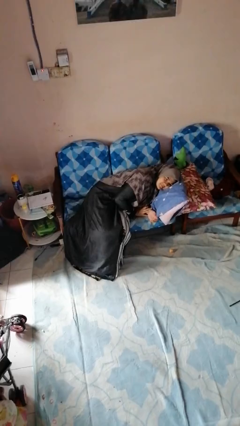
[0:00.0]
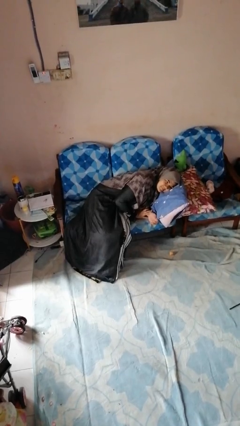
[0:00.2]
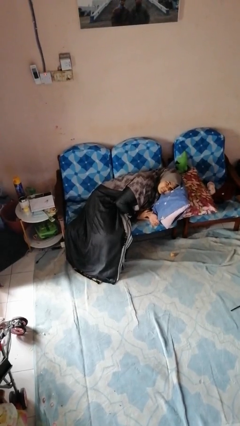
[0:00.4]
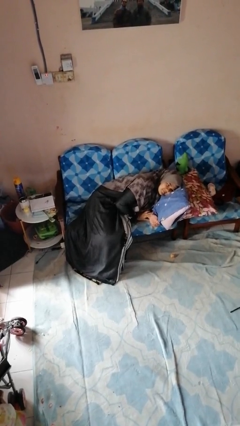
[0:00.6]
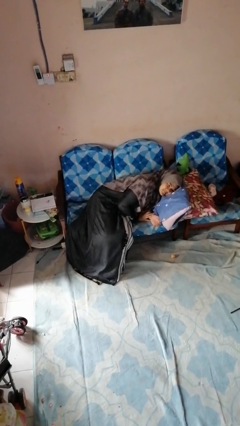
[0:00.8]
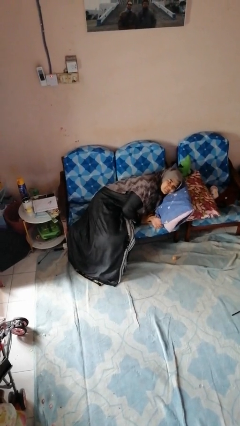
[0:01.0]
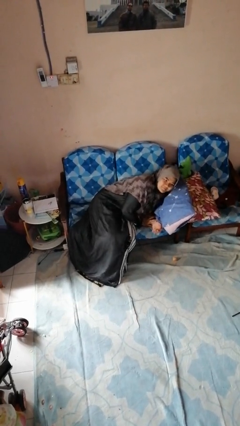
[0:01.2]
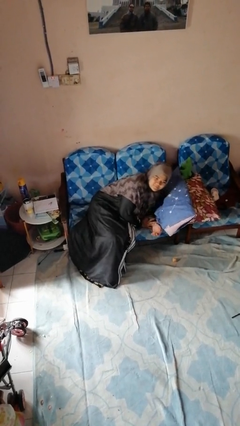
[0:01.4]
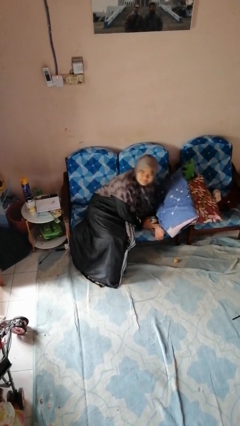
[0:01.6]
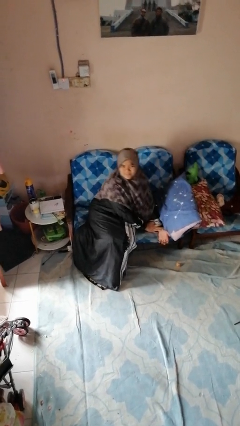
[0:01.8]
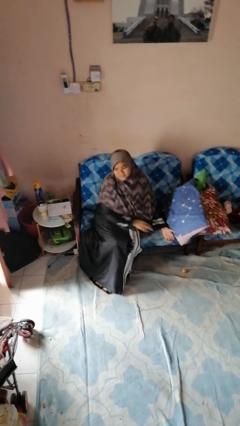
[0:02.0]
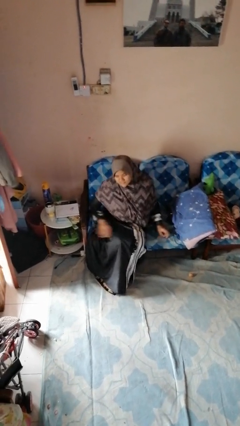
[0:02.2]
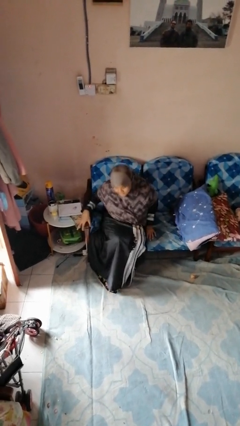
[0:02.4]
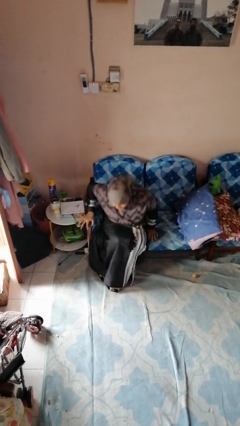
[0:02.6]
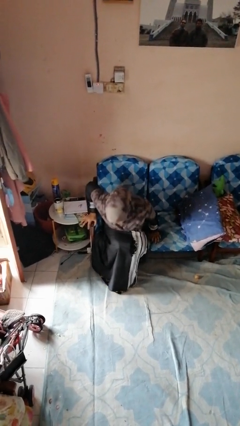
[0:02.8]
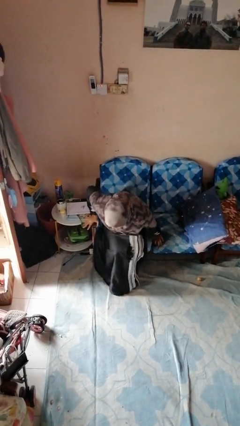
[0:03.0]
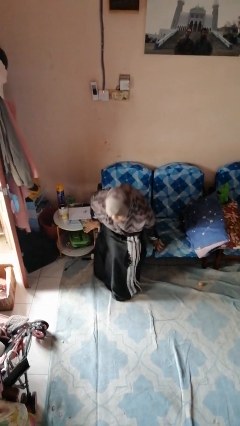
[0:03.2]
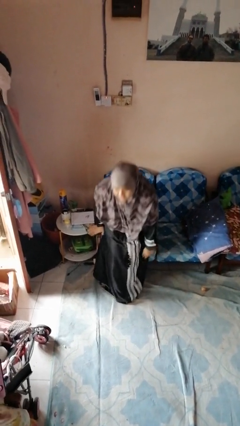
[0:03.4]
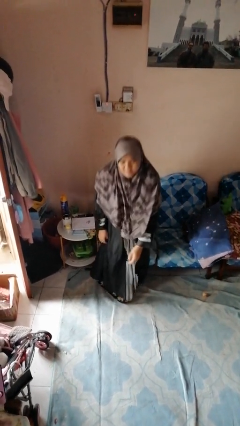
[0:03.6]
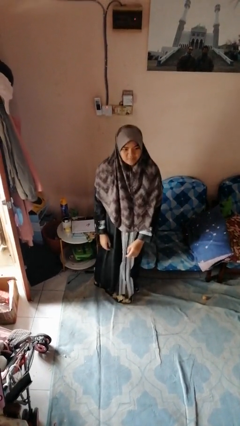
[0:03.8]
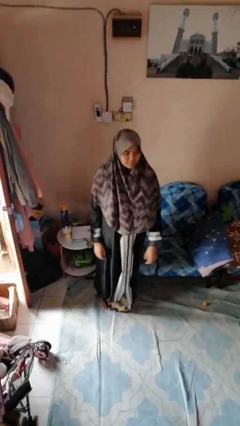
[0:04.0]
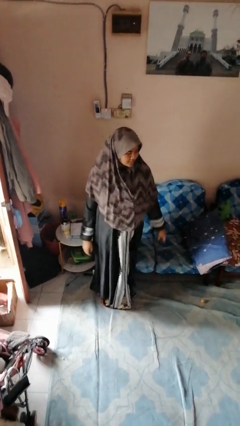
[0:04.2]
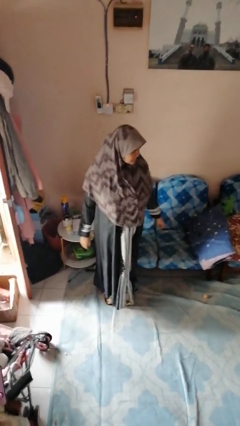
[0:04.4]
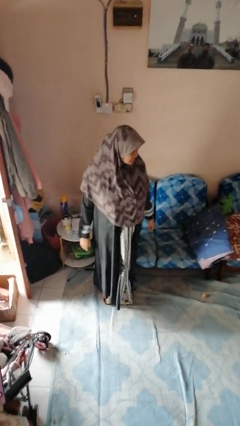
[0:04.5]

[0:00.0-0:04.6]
person stands up

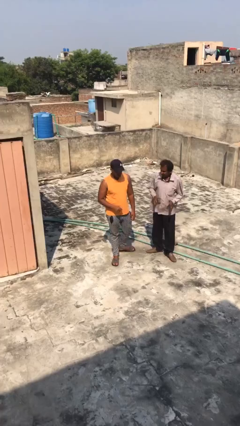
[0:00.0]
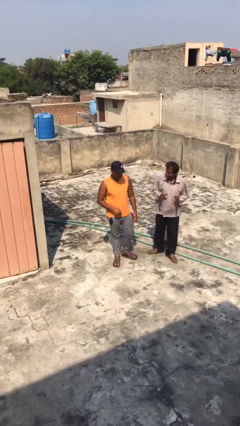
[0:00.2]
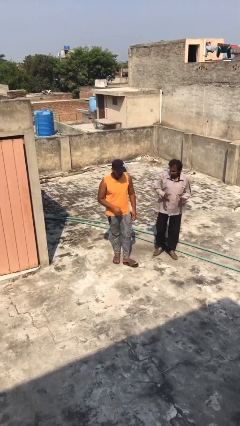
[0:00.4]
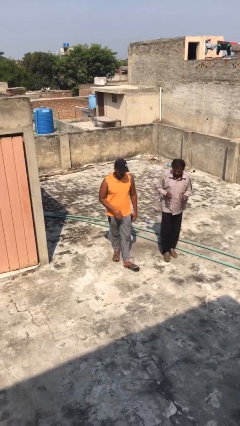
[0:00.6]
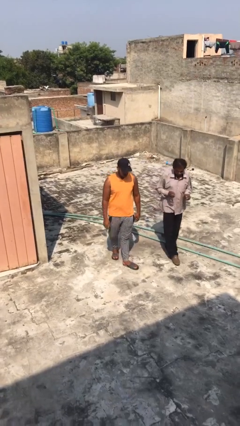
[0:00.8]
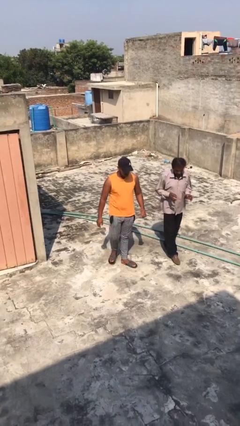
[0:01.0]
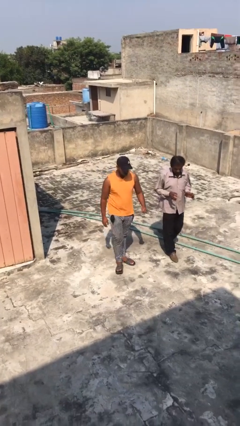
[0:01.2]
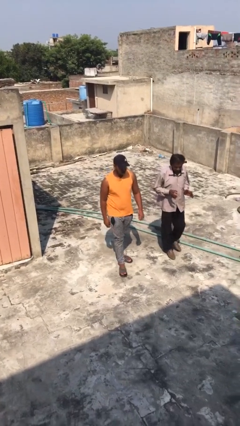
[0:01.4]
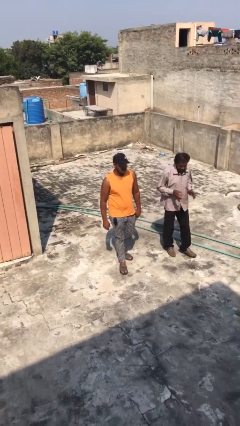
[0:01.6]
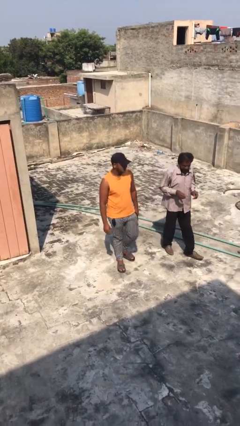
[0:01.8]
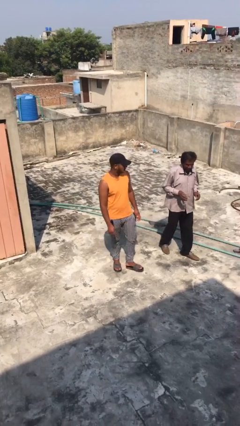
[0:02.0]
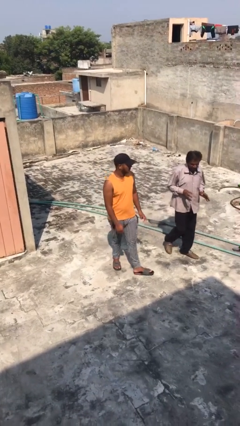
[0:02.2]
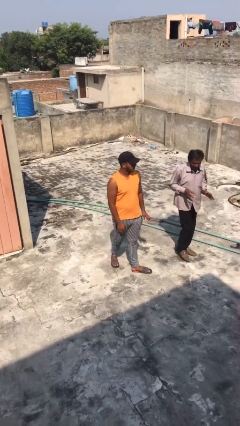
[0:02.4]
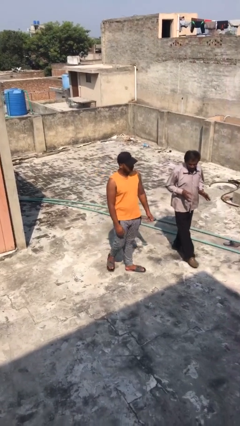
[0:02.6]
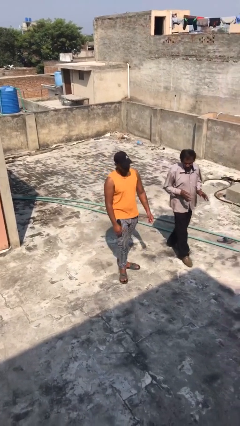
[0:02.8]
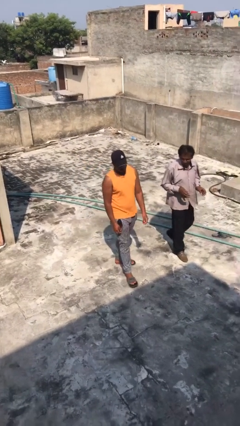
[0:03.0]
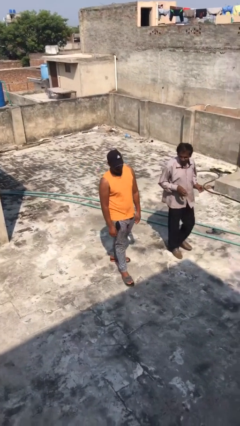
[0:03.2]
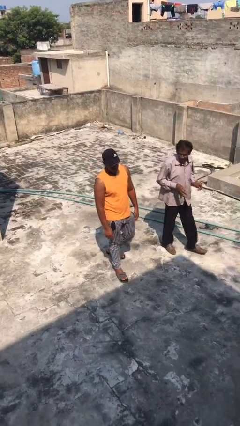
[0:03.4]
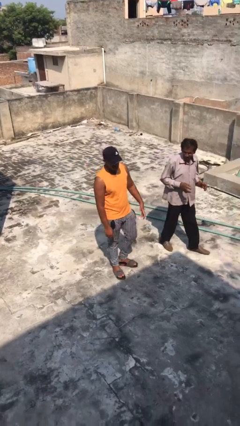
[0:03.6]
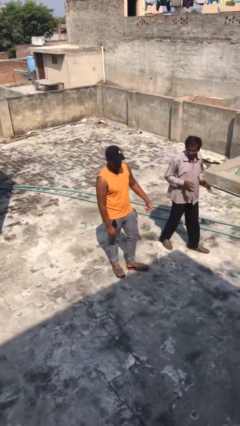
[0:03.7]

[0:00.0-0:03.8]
person talks to person

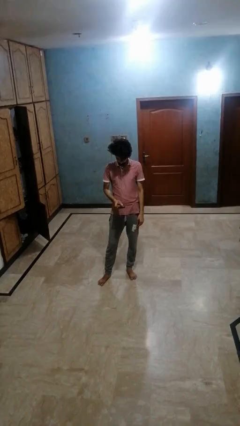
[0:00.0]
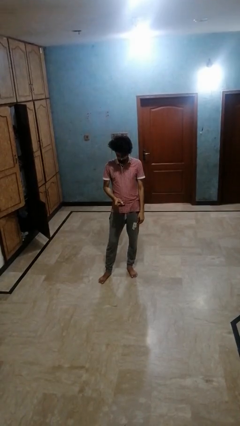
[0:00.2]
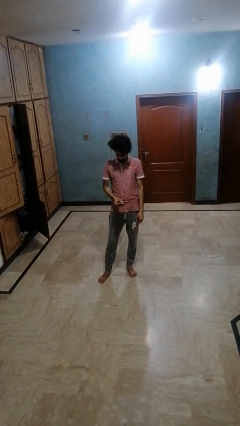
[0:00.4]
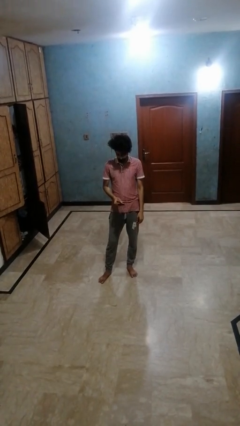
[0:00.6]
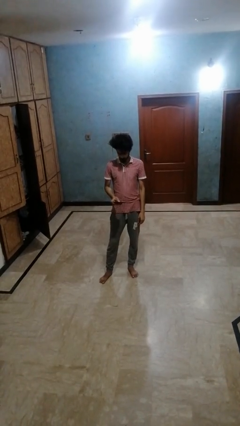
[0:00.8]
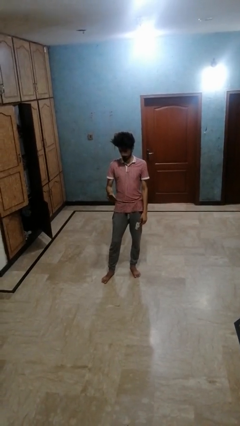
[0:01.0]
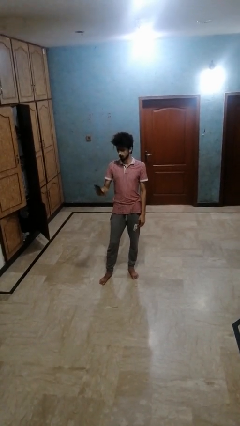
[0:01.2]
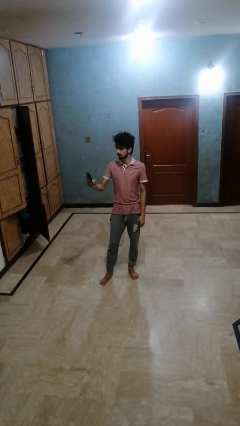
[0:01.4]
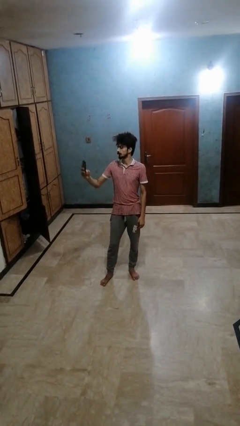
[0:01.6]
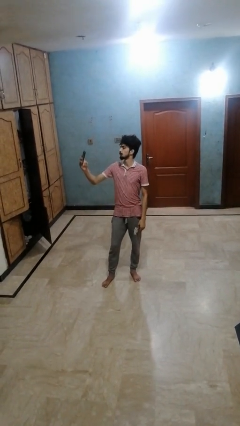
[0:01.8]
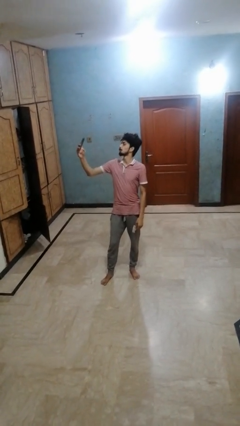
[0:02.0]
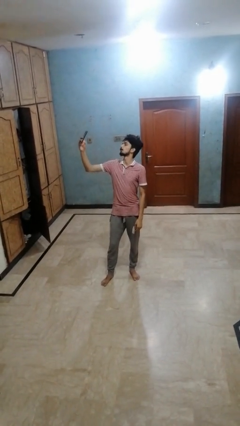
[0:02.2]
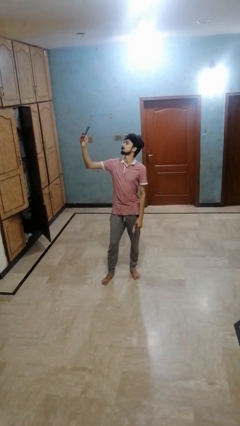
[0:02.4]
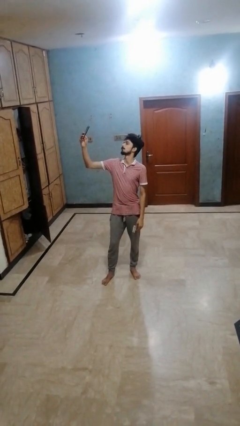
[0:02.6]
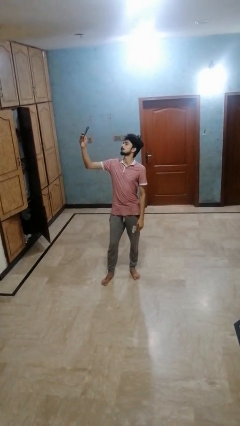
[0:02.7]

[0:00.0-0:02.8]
person takes selfie

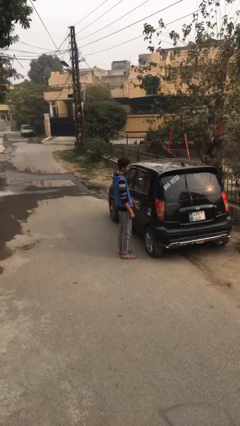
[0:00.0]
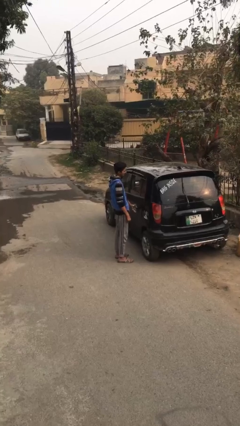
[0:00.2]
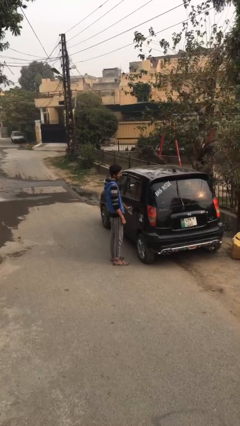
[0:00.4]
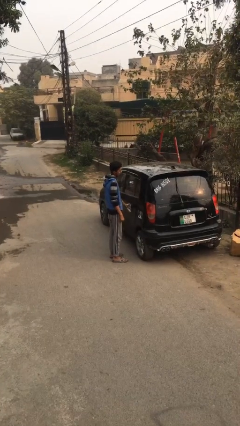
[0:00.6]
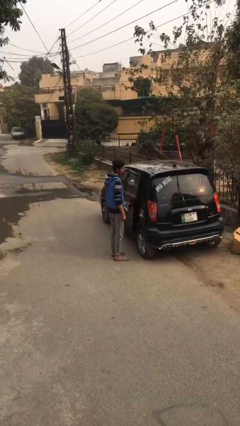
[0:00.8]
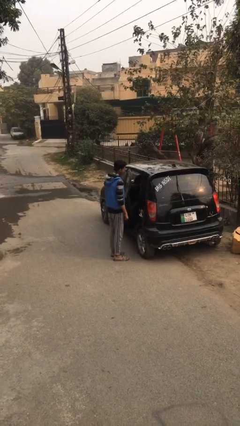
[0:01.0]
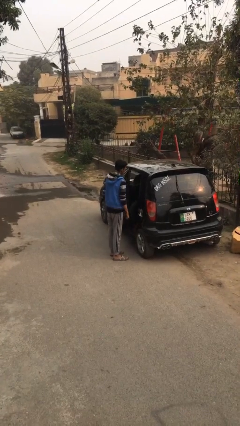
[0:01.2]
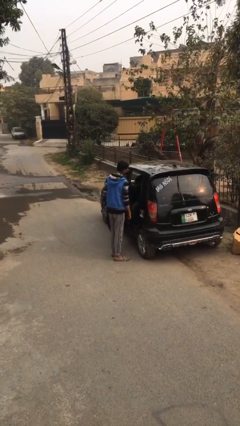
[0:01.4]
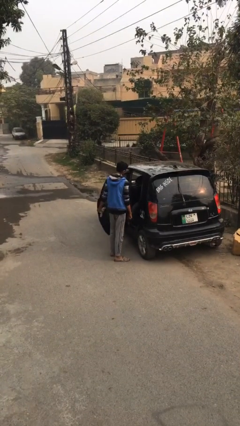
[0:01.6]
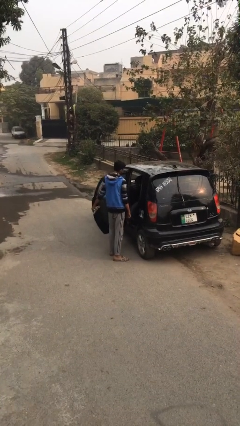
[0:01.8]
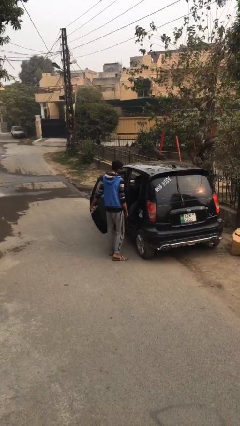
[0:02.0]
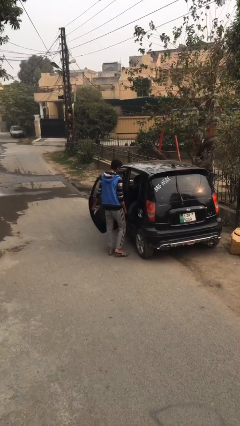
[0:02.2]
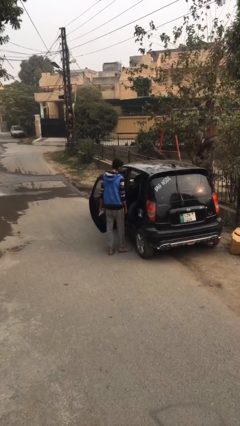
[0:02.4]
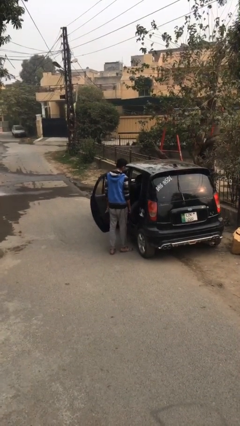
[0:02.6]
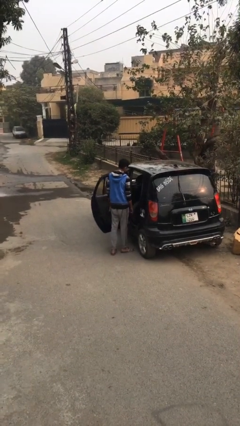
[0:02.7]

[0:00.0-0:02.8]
person opens car door

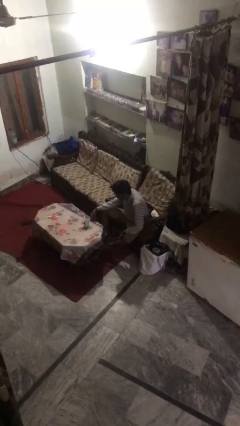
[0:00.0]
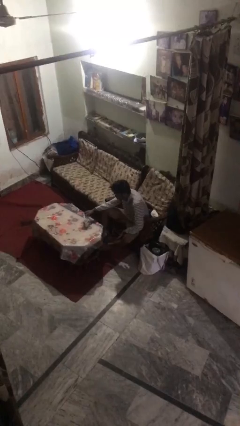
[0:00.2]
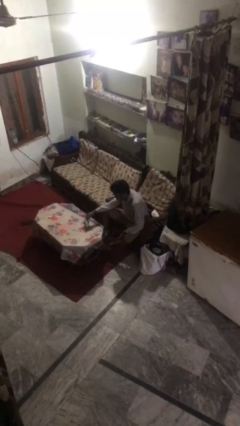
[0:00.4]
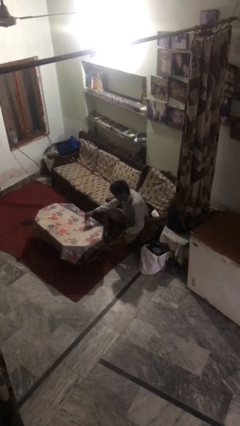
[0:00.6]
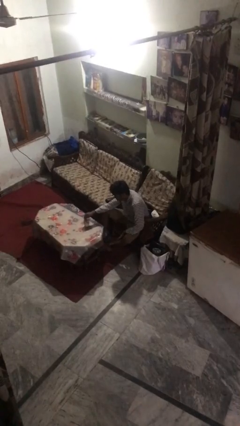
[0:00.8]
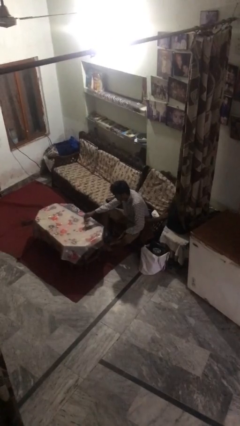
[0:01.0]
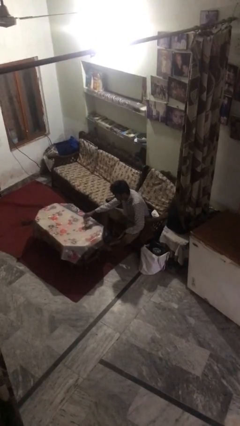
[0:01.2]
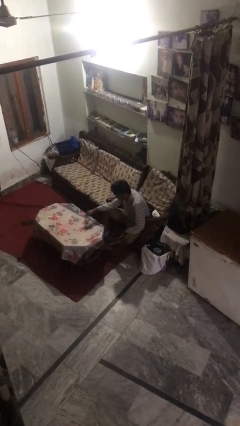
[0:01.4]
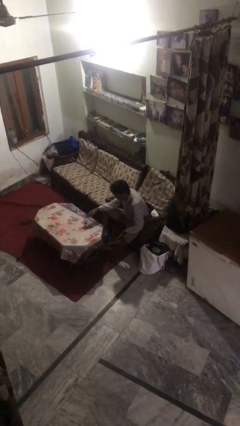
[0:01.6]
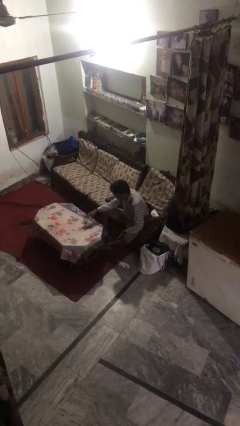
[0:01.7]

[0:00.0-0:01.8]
person stirs mug

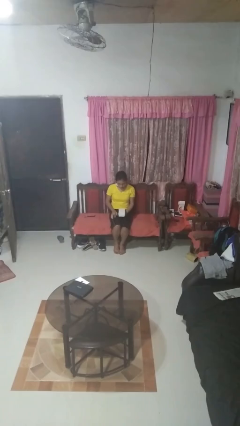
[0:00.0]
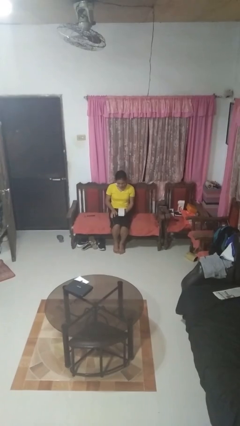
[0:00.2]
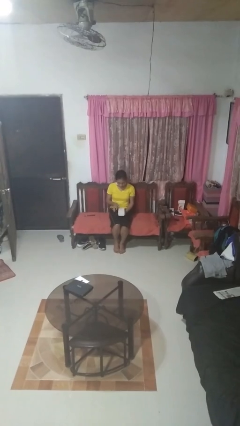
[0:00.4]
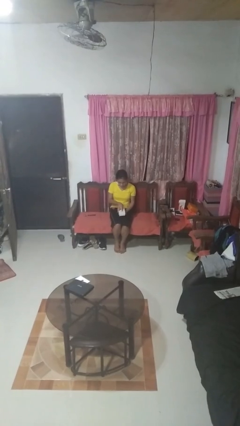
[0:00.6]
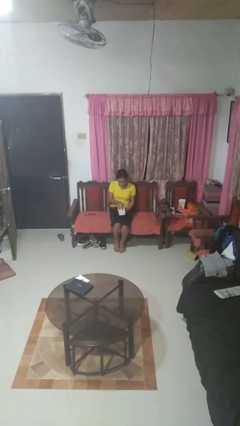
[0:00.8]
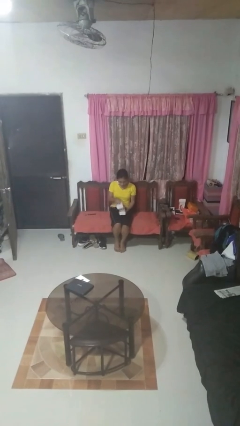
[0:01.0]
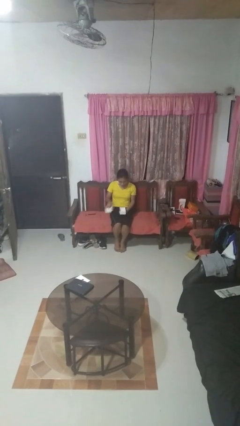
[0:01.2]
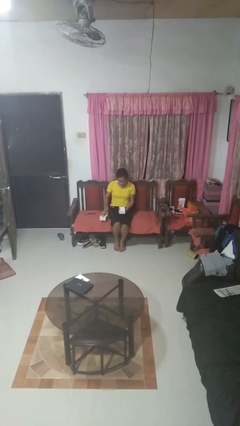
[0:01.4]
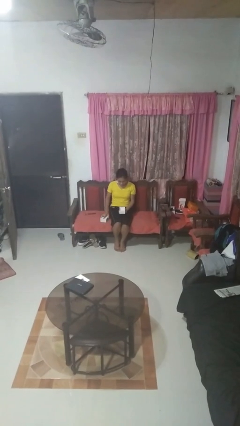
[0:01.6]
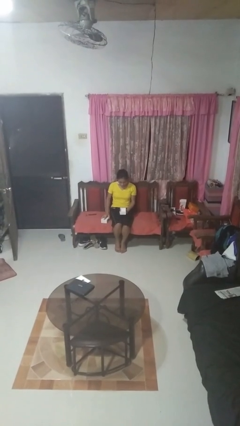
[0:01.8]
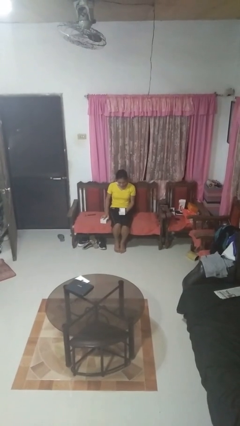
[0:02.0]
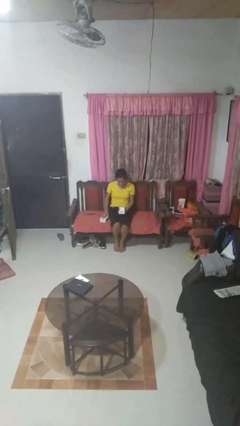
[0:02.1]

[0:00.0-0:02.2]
person opens jewelry box
